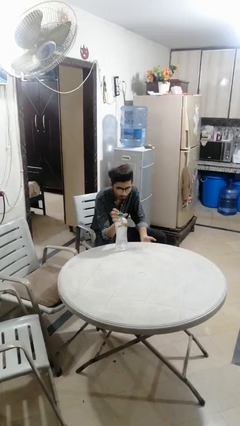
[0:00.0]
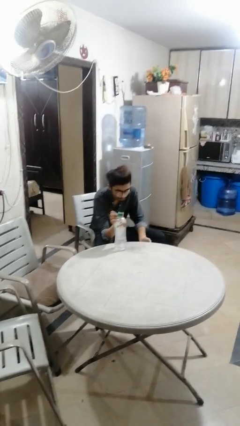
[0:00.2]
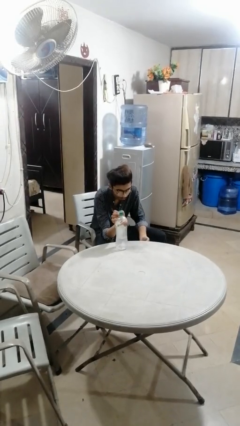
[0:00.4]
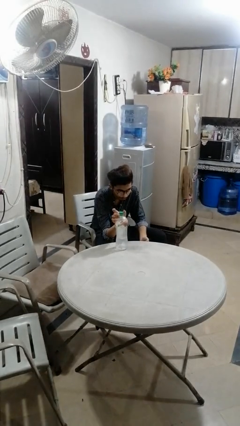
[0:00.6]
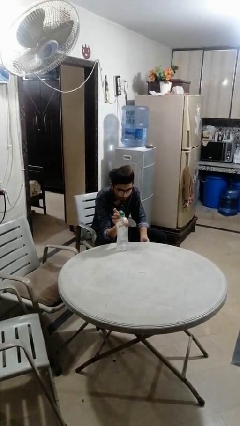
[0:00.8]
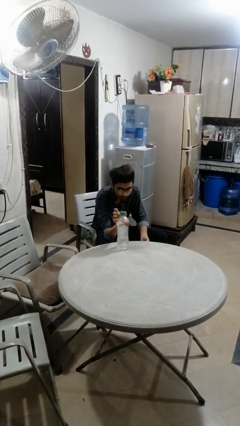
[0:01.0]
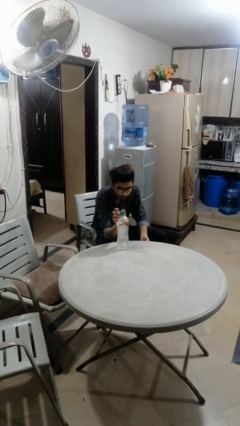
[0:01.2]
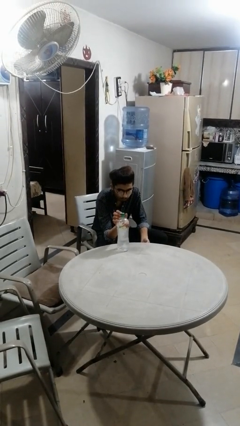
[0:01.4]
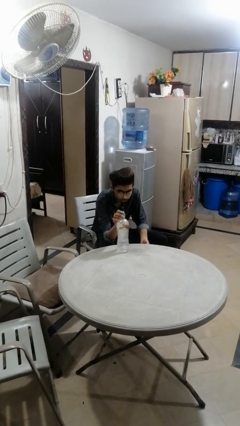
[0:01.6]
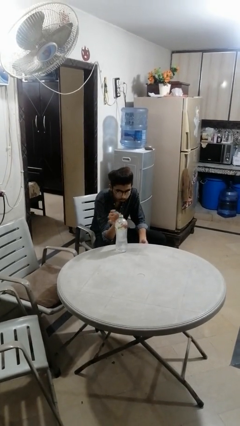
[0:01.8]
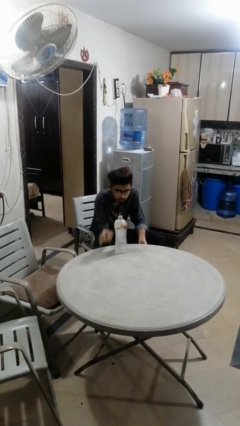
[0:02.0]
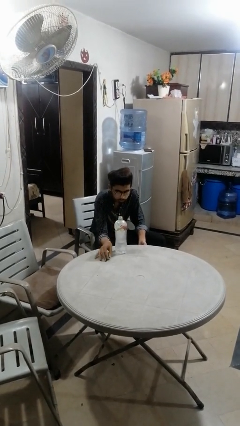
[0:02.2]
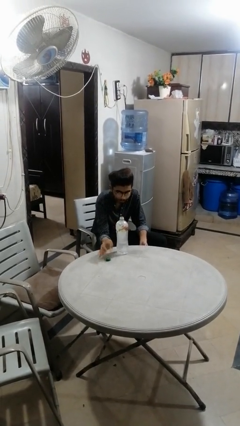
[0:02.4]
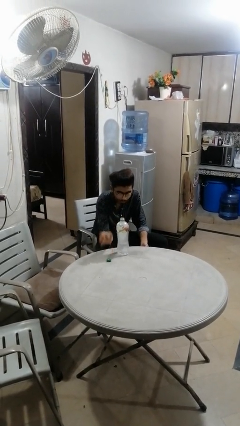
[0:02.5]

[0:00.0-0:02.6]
person unscrews lid from bottle

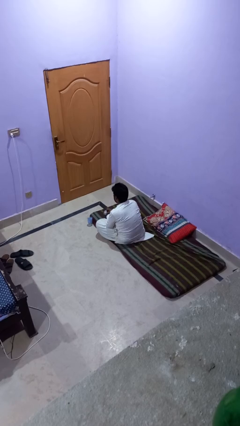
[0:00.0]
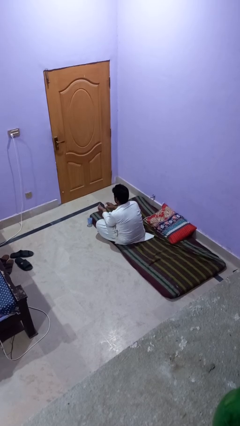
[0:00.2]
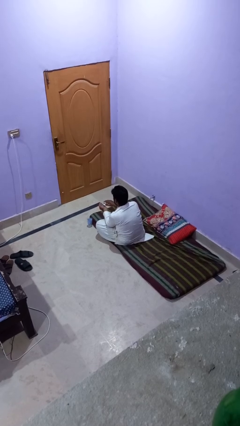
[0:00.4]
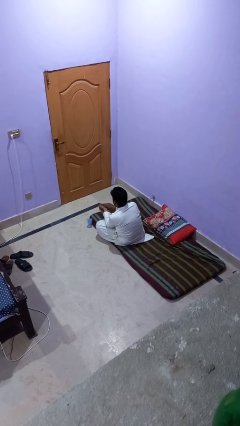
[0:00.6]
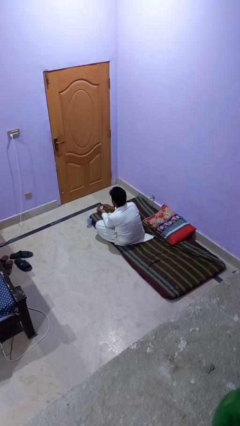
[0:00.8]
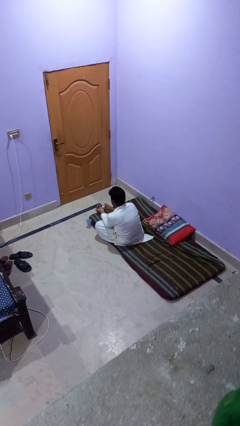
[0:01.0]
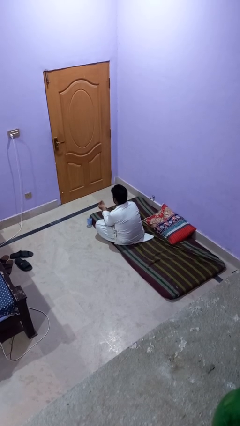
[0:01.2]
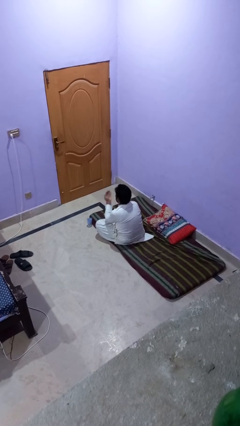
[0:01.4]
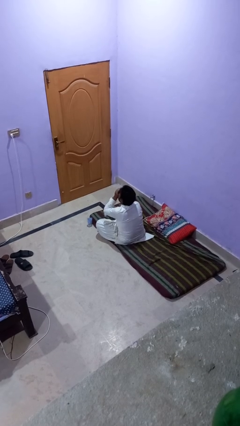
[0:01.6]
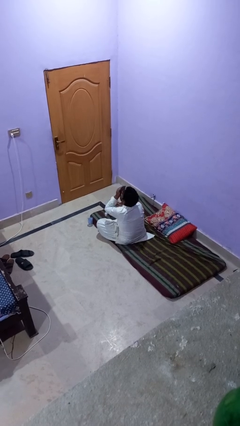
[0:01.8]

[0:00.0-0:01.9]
person takes medicine pills

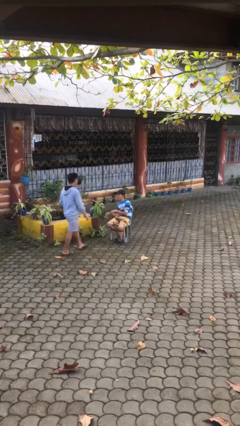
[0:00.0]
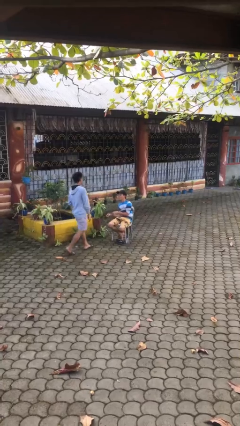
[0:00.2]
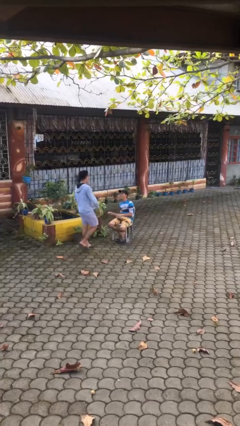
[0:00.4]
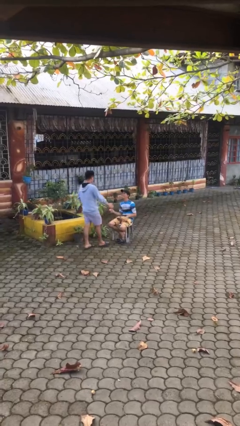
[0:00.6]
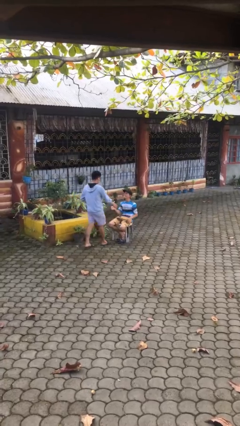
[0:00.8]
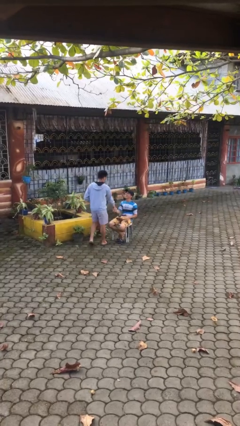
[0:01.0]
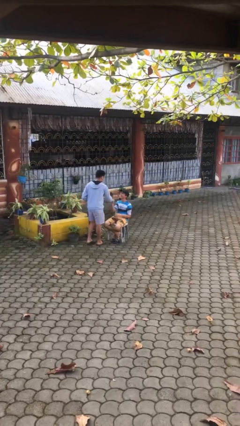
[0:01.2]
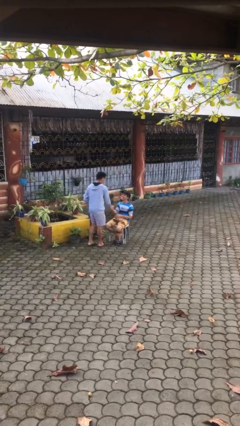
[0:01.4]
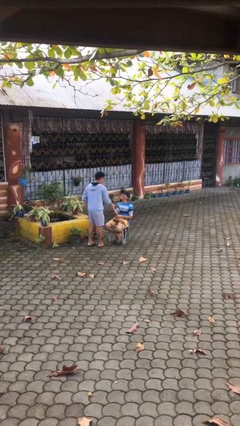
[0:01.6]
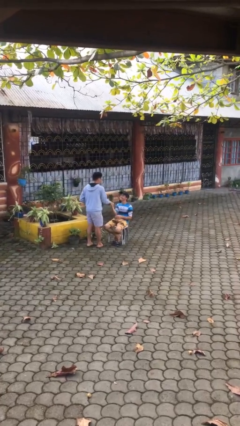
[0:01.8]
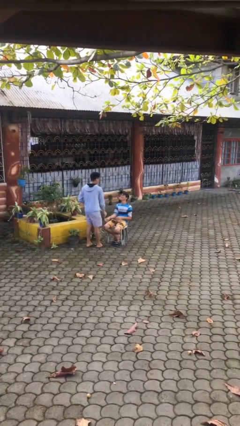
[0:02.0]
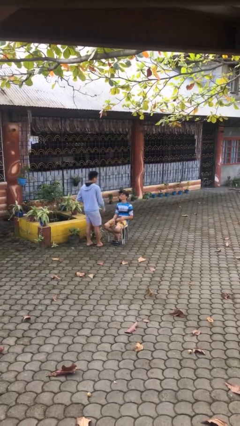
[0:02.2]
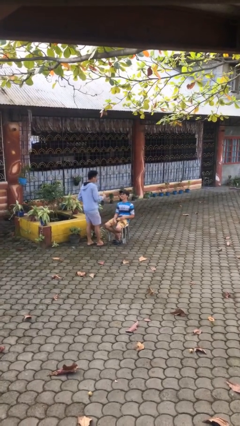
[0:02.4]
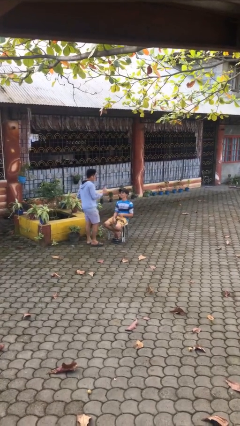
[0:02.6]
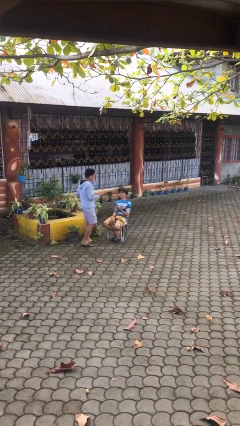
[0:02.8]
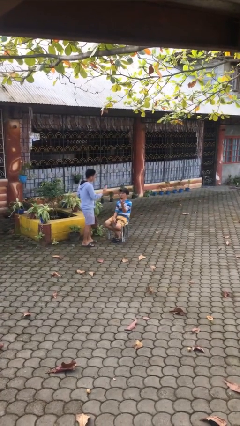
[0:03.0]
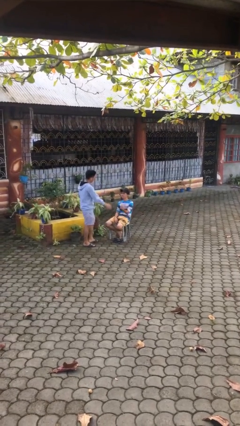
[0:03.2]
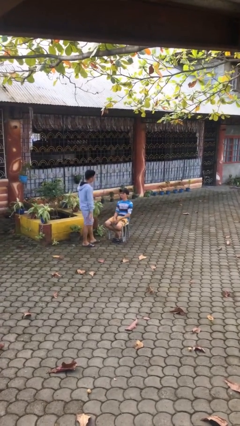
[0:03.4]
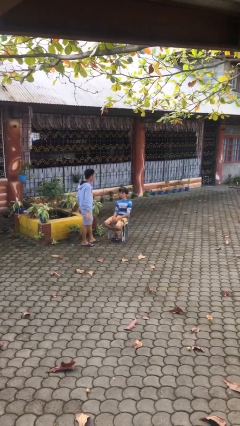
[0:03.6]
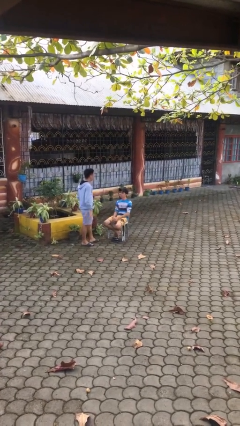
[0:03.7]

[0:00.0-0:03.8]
person shakes hand

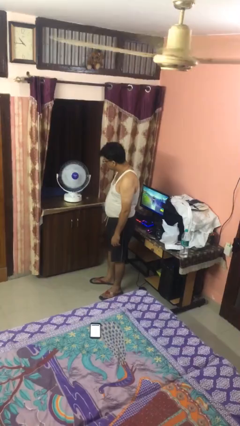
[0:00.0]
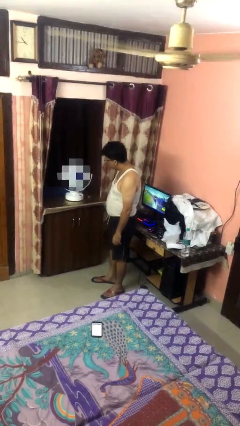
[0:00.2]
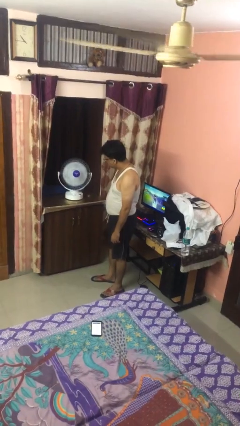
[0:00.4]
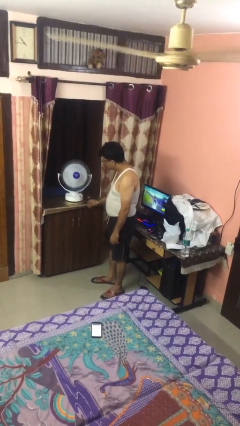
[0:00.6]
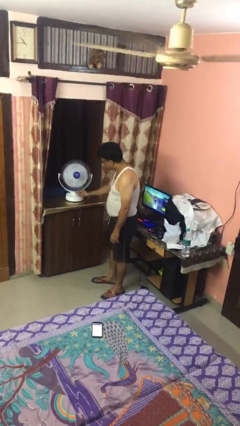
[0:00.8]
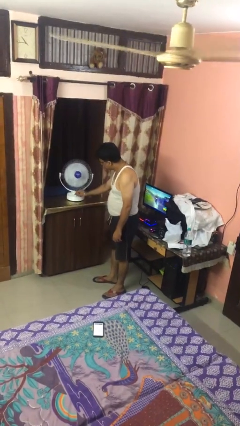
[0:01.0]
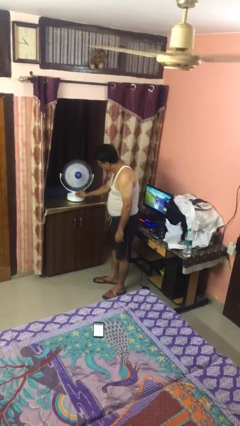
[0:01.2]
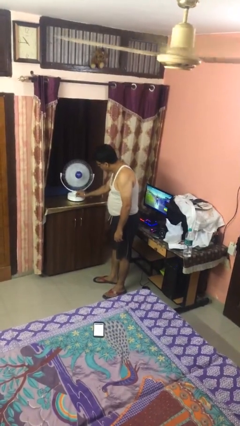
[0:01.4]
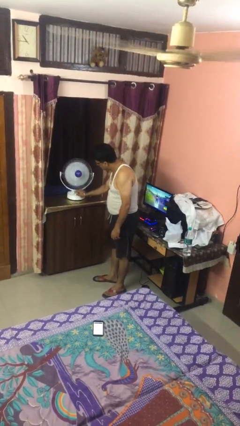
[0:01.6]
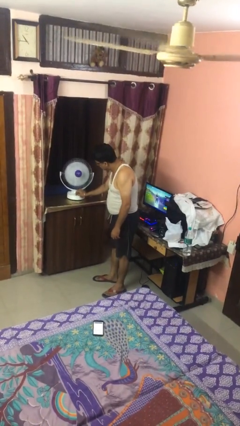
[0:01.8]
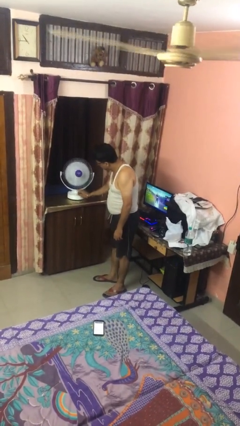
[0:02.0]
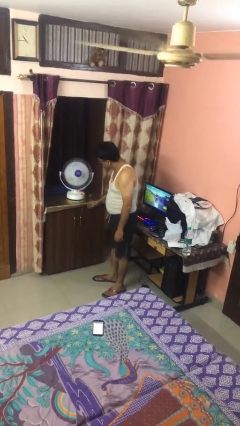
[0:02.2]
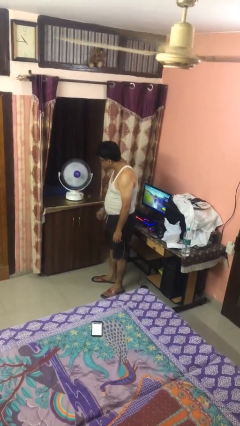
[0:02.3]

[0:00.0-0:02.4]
person turns off fan

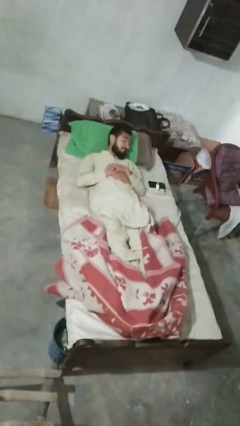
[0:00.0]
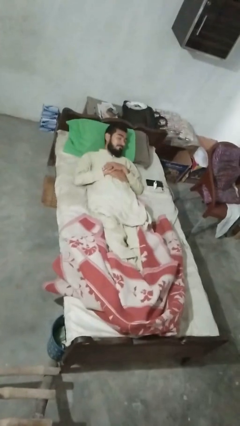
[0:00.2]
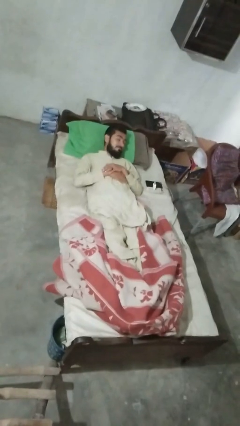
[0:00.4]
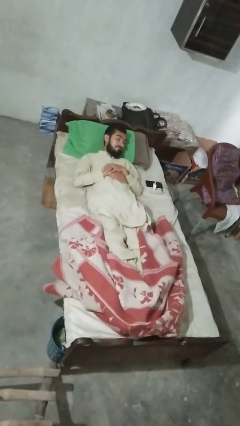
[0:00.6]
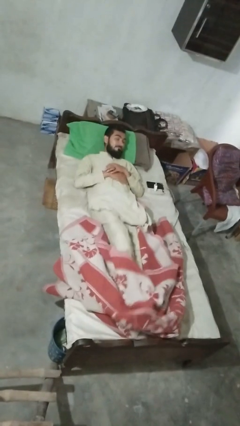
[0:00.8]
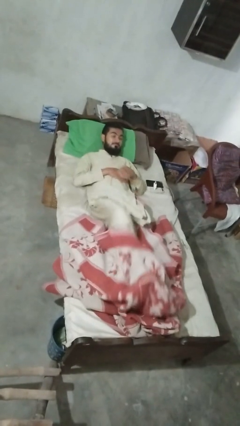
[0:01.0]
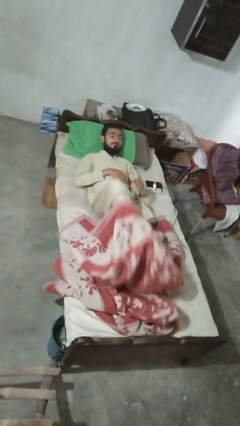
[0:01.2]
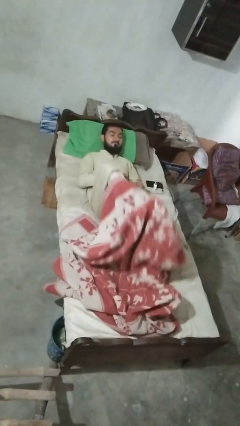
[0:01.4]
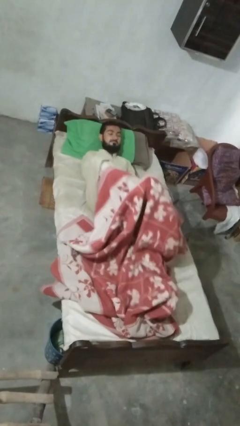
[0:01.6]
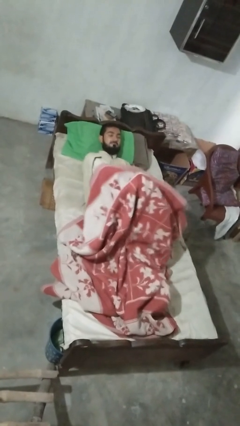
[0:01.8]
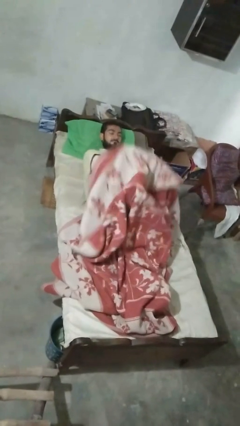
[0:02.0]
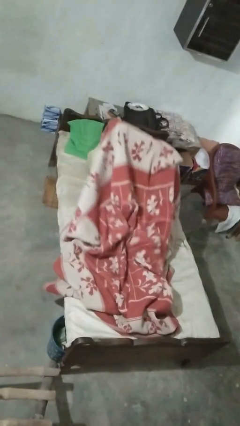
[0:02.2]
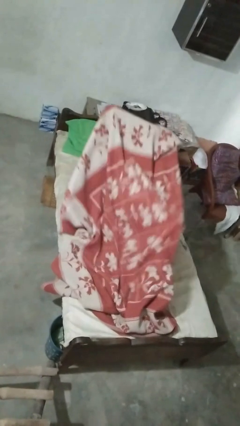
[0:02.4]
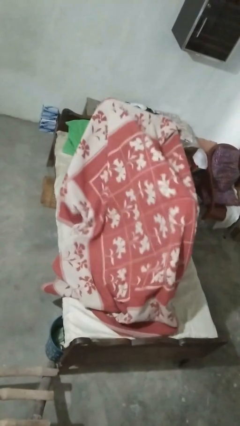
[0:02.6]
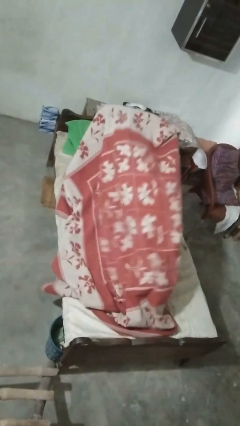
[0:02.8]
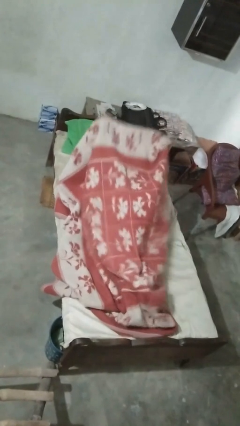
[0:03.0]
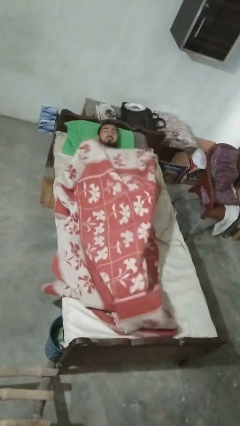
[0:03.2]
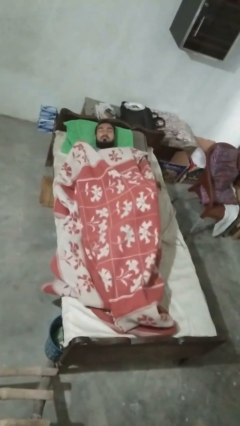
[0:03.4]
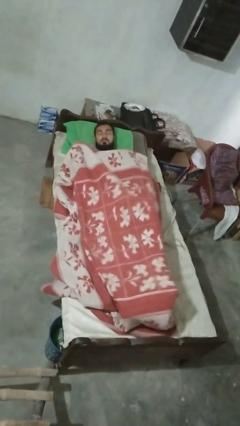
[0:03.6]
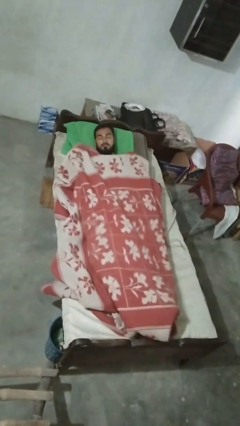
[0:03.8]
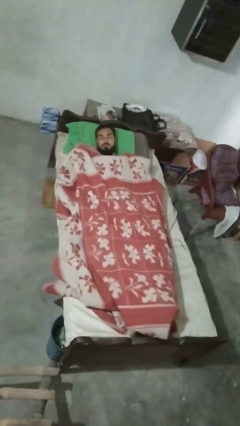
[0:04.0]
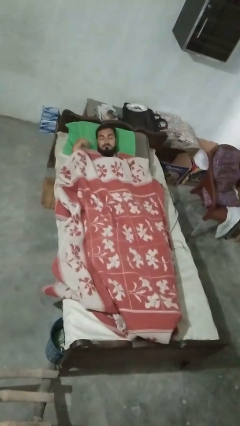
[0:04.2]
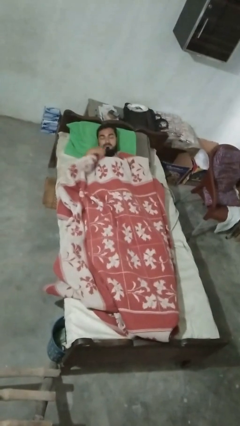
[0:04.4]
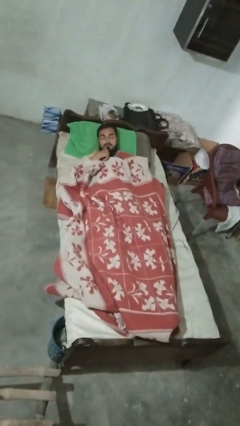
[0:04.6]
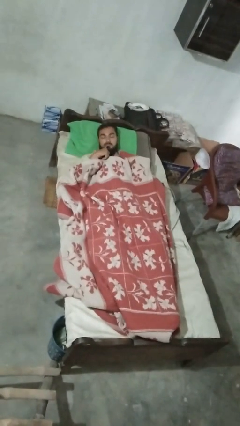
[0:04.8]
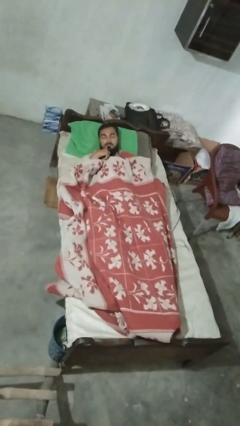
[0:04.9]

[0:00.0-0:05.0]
person covers with bedsheets

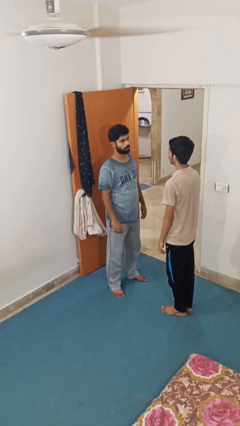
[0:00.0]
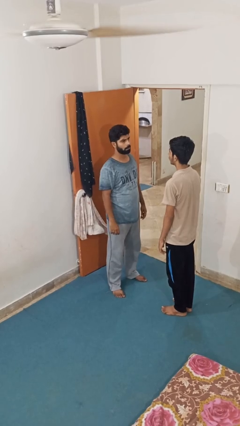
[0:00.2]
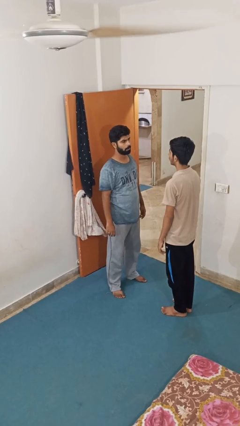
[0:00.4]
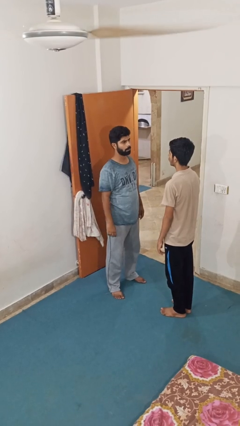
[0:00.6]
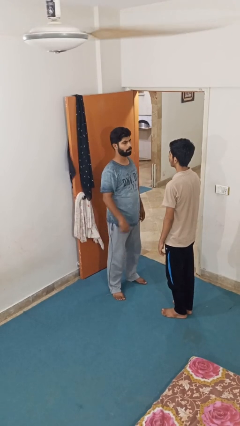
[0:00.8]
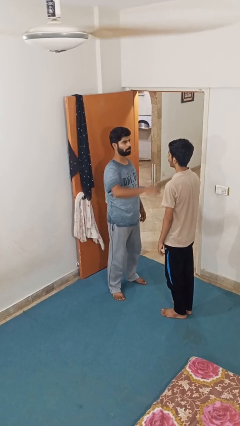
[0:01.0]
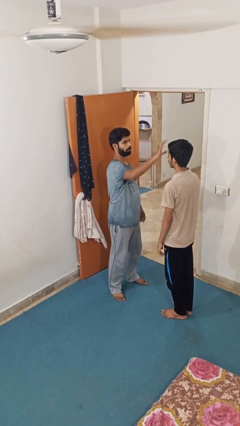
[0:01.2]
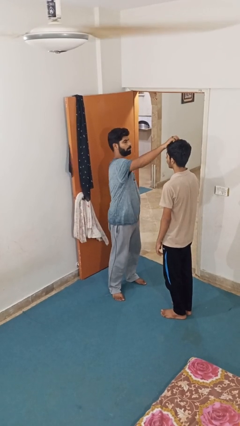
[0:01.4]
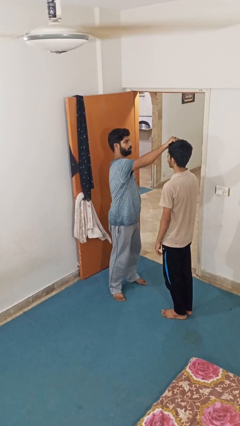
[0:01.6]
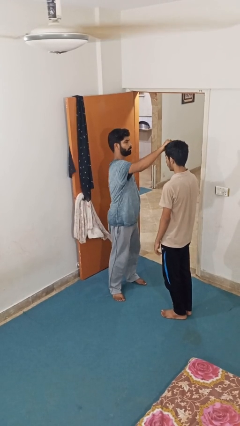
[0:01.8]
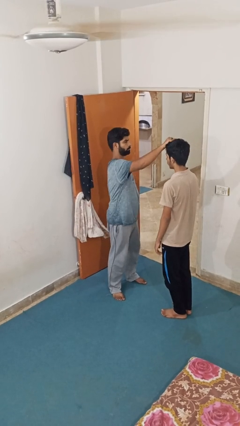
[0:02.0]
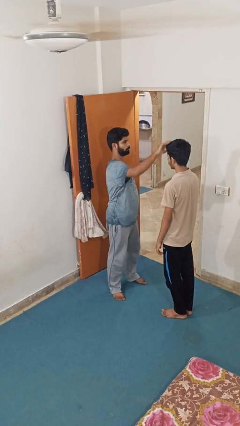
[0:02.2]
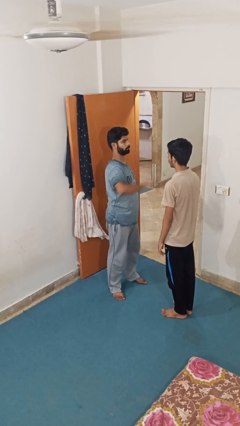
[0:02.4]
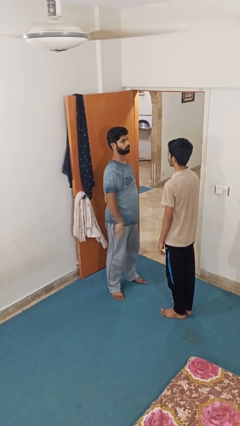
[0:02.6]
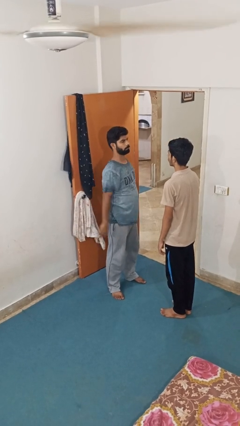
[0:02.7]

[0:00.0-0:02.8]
person grabs person by hair
